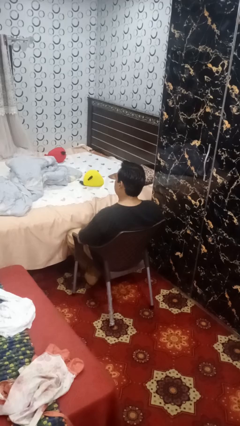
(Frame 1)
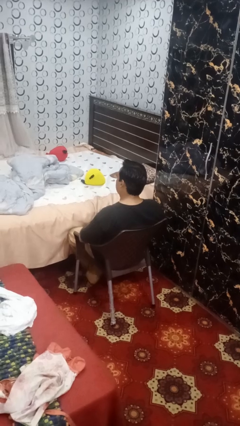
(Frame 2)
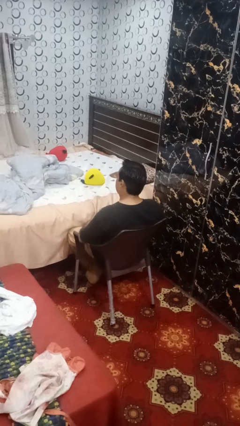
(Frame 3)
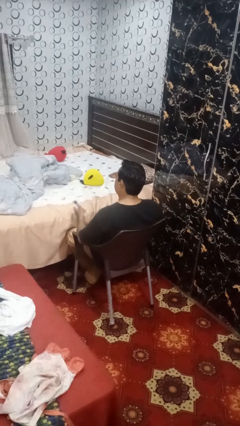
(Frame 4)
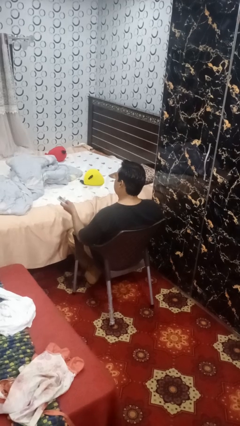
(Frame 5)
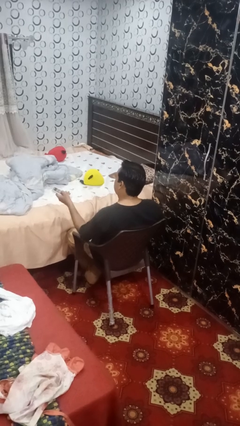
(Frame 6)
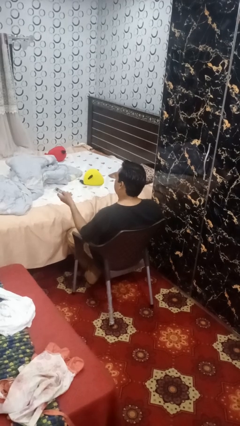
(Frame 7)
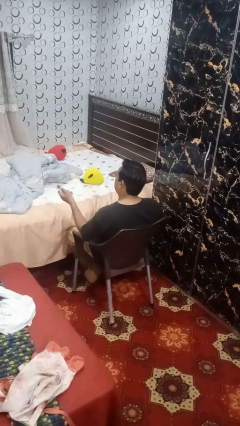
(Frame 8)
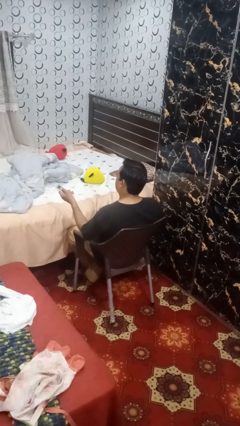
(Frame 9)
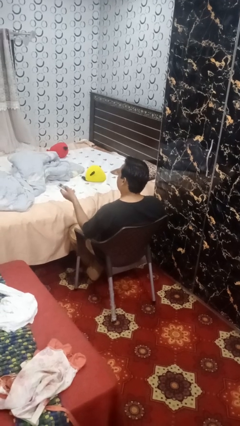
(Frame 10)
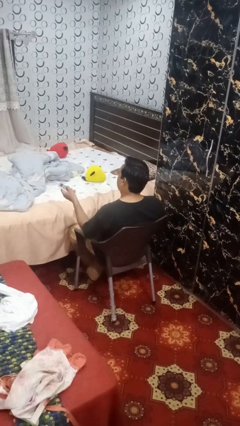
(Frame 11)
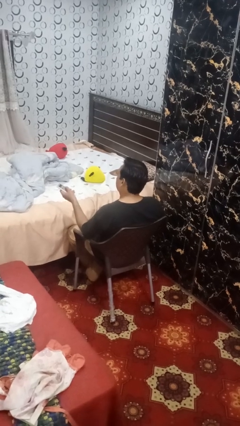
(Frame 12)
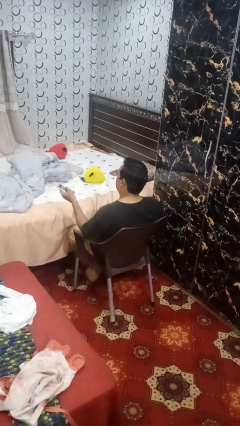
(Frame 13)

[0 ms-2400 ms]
person uses television remote

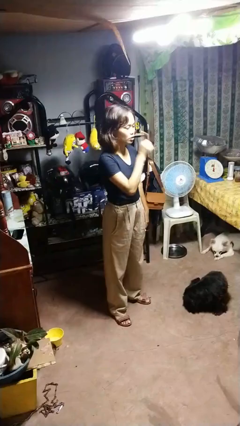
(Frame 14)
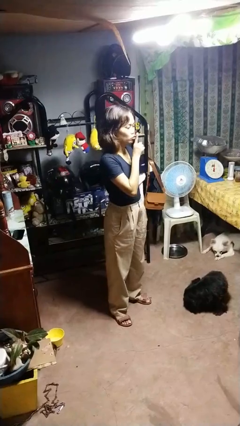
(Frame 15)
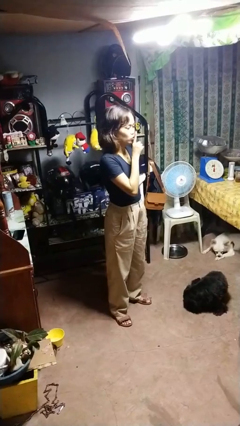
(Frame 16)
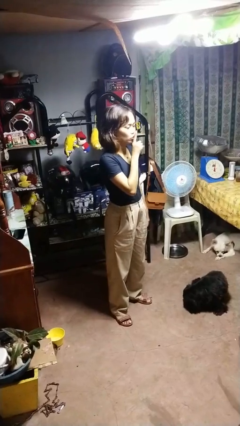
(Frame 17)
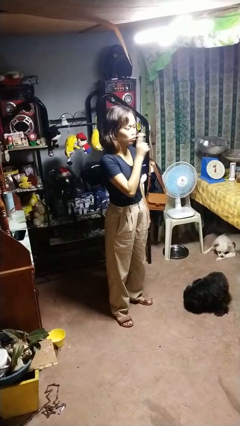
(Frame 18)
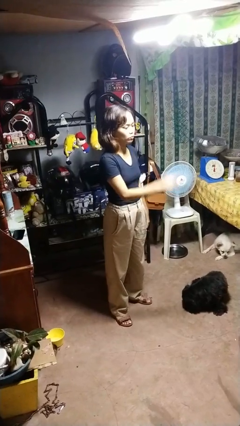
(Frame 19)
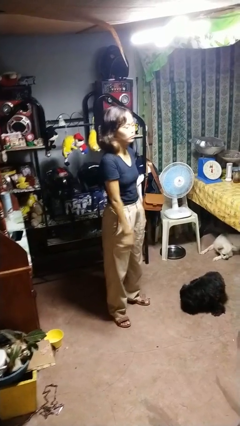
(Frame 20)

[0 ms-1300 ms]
person gestures be quiet

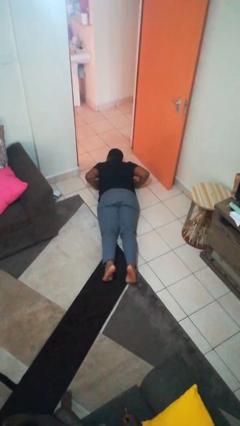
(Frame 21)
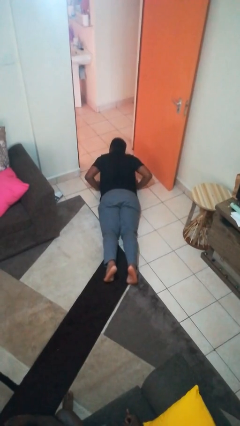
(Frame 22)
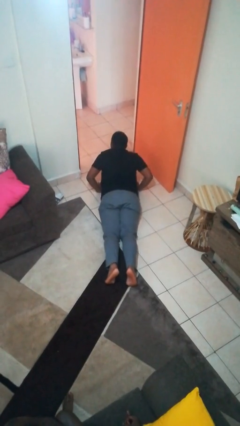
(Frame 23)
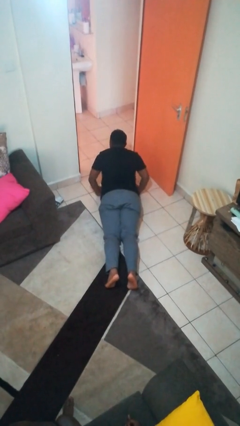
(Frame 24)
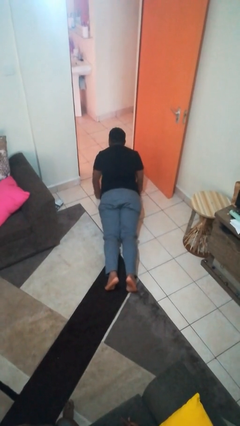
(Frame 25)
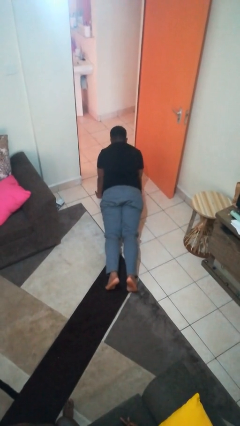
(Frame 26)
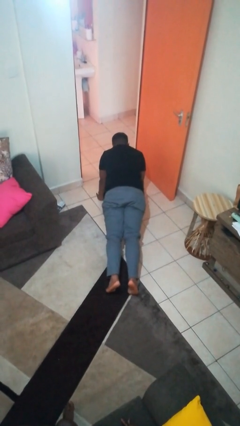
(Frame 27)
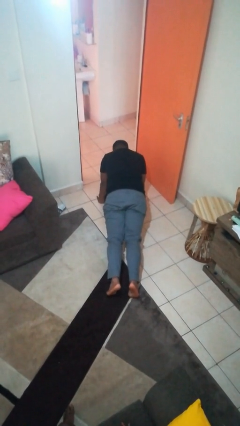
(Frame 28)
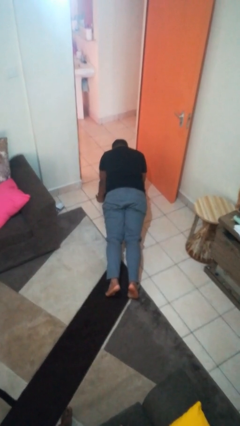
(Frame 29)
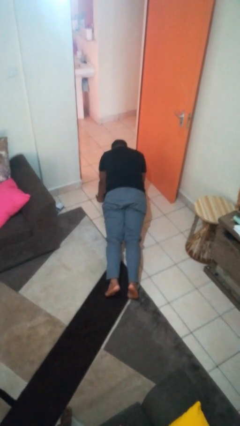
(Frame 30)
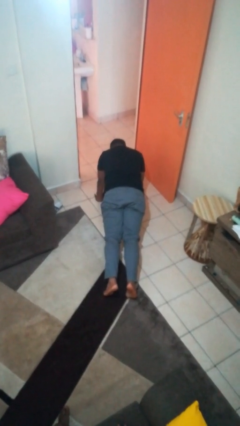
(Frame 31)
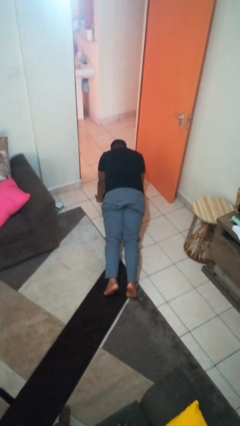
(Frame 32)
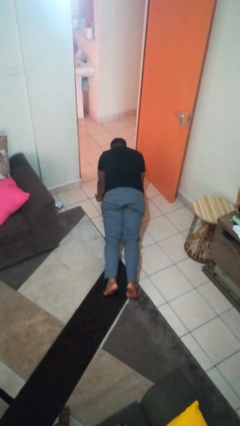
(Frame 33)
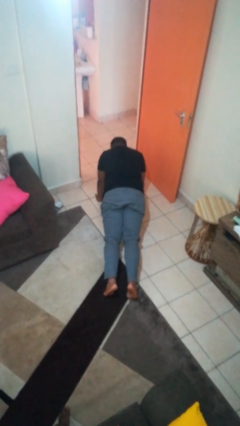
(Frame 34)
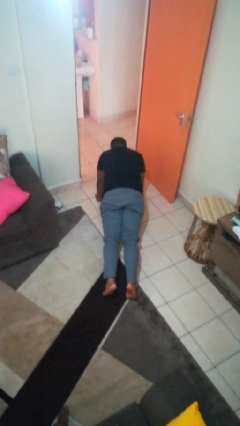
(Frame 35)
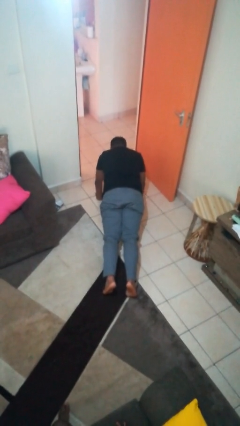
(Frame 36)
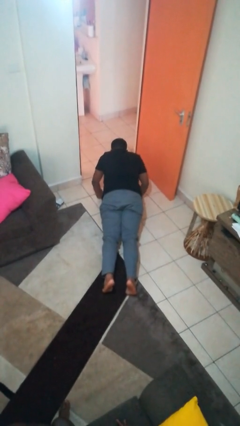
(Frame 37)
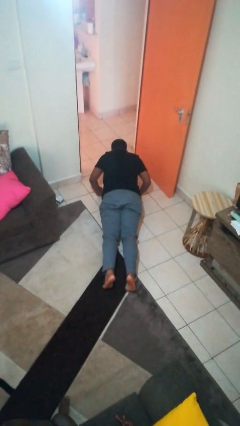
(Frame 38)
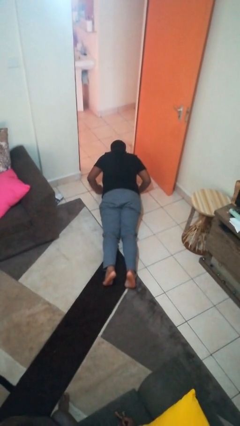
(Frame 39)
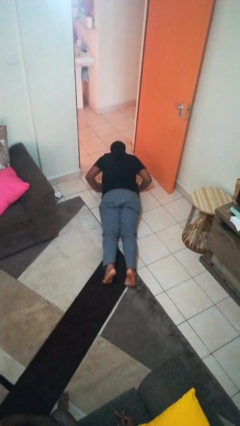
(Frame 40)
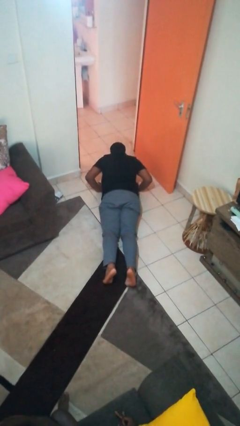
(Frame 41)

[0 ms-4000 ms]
person exercises with pushup

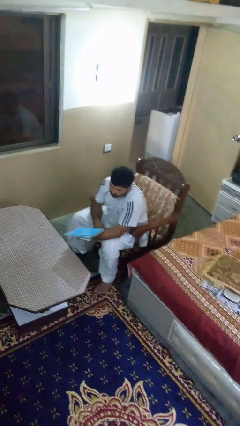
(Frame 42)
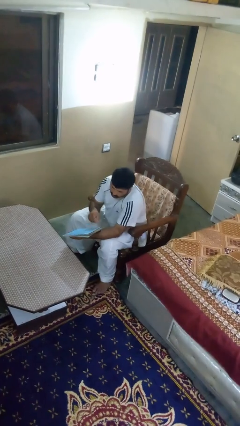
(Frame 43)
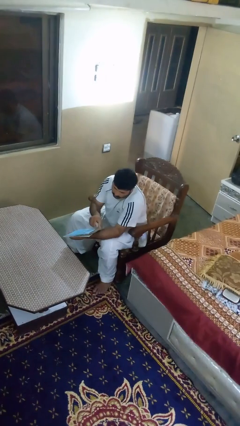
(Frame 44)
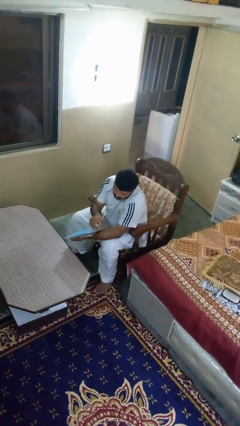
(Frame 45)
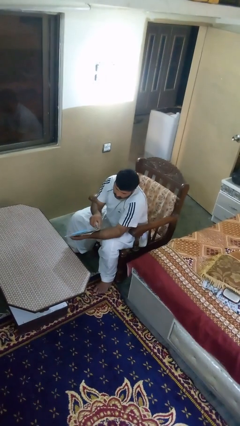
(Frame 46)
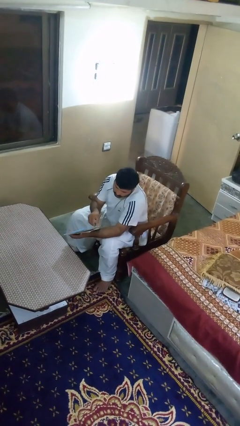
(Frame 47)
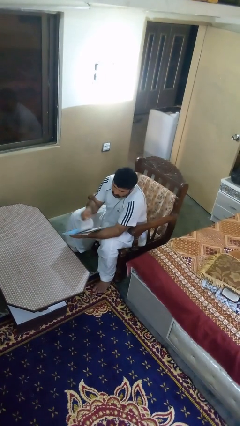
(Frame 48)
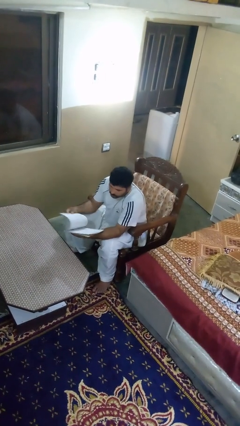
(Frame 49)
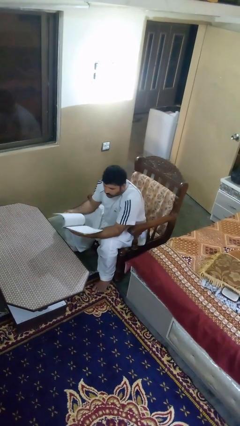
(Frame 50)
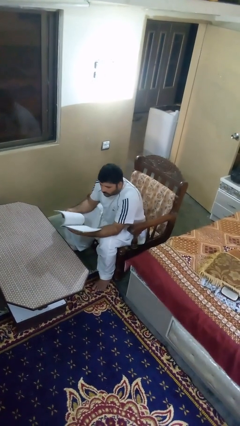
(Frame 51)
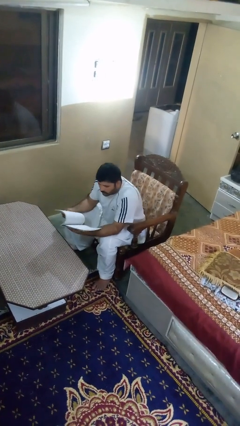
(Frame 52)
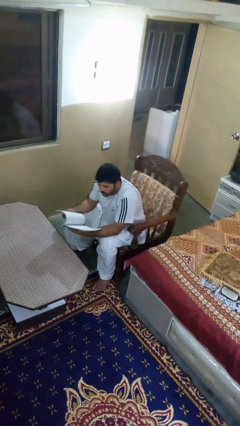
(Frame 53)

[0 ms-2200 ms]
person reads magazine

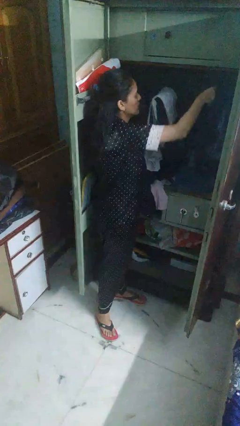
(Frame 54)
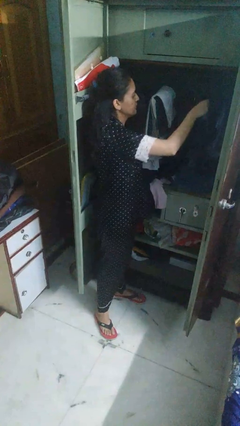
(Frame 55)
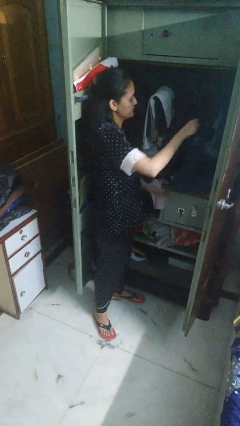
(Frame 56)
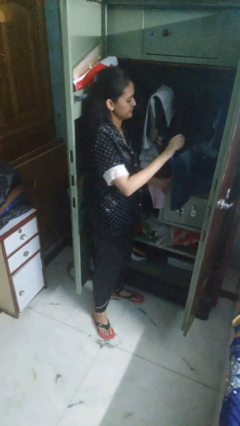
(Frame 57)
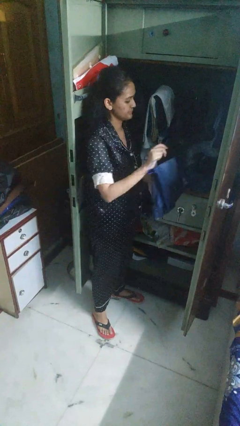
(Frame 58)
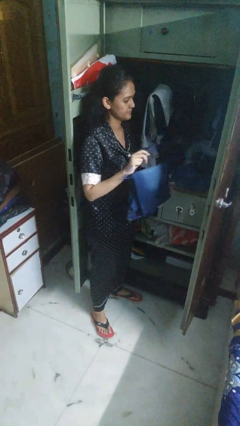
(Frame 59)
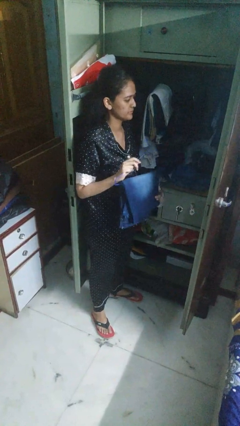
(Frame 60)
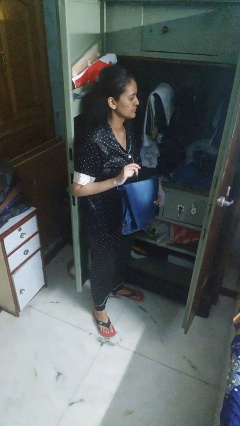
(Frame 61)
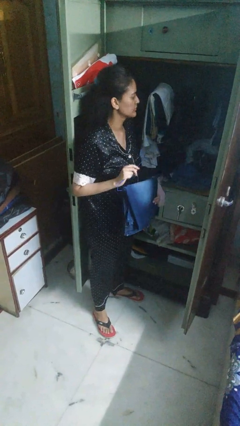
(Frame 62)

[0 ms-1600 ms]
person takes clothes from closet

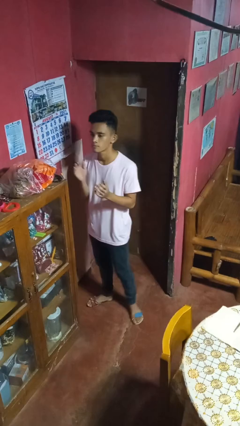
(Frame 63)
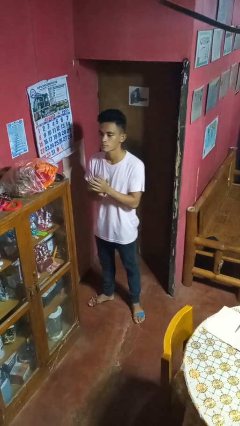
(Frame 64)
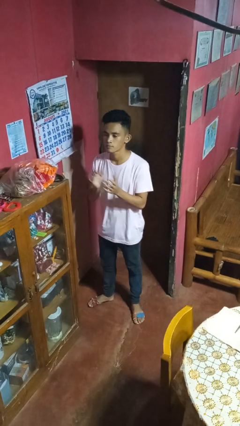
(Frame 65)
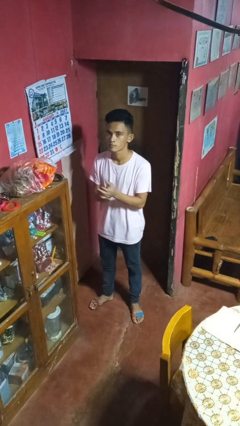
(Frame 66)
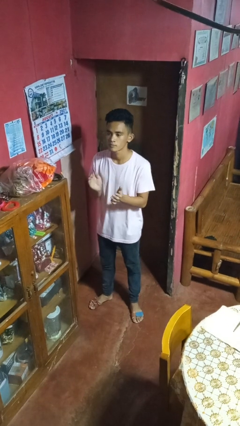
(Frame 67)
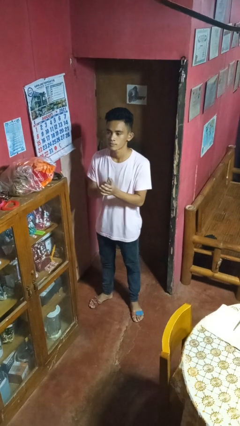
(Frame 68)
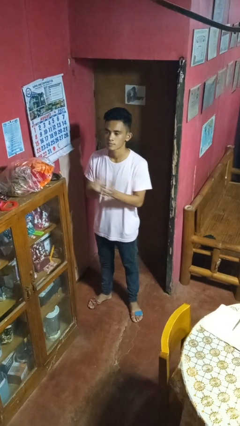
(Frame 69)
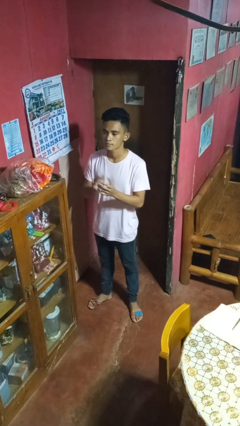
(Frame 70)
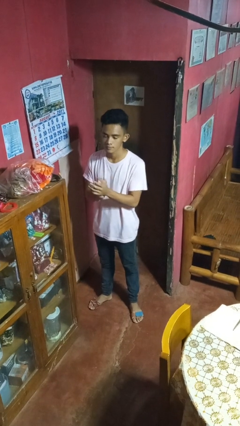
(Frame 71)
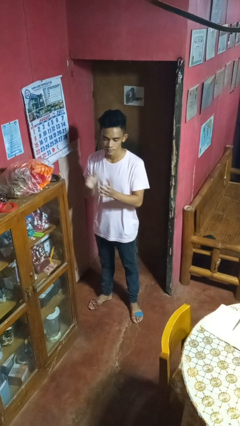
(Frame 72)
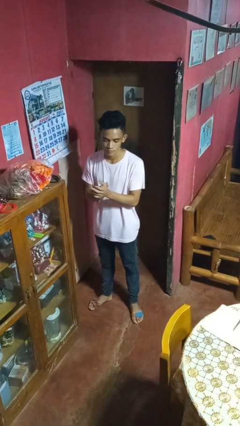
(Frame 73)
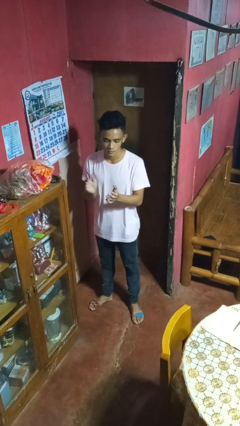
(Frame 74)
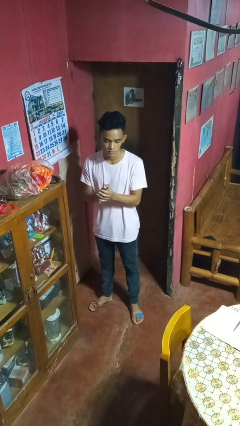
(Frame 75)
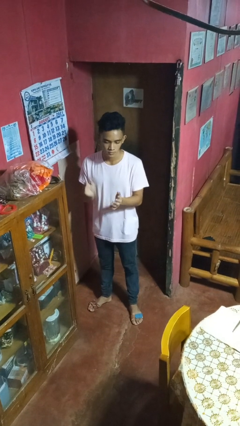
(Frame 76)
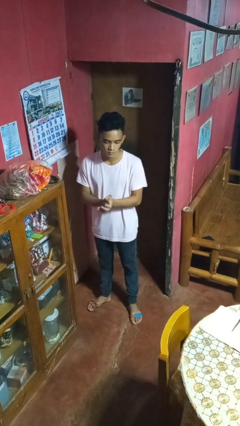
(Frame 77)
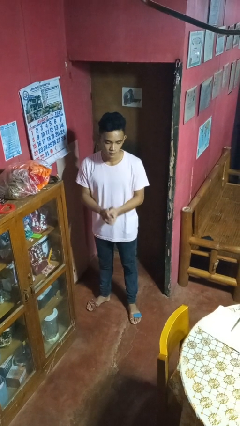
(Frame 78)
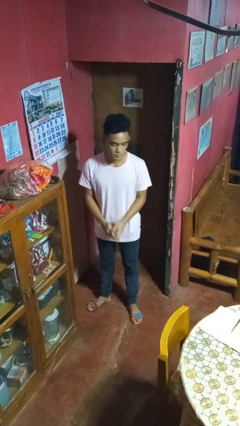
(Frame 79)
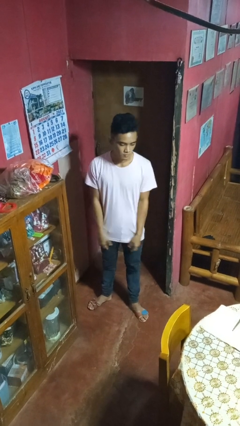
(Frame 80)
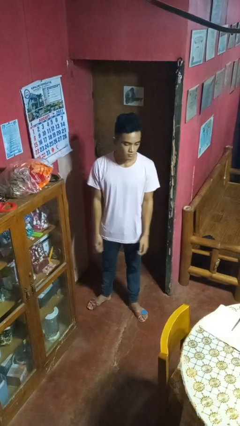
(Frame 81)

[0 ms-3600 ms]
person claps hands

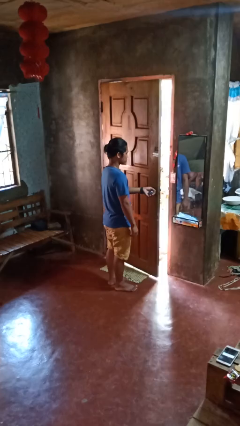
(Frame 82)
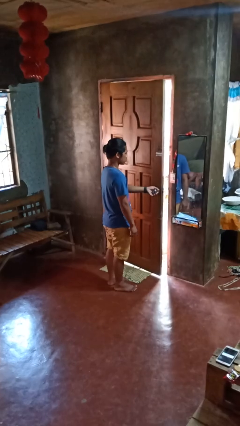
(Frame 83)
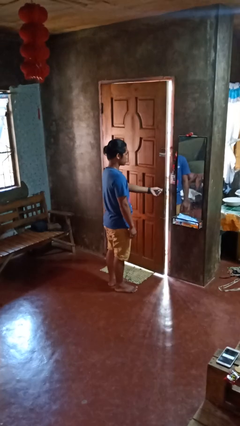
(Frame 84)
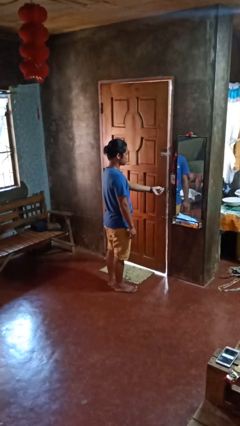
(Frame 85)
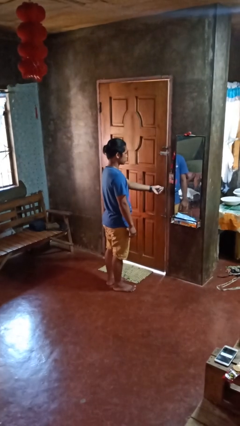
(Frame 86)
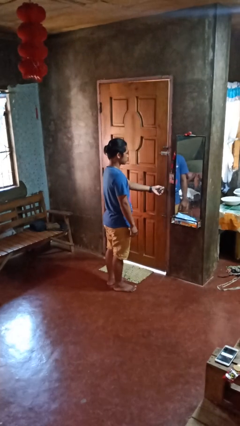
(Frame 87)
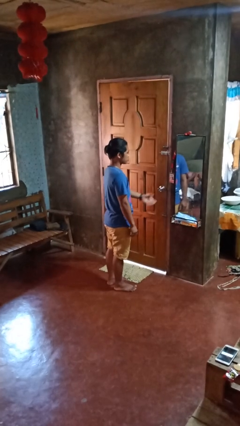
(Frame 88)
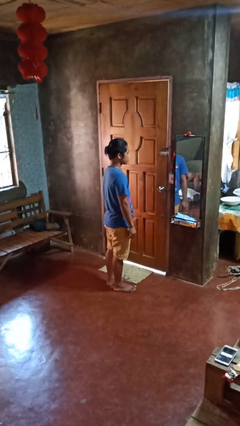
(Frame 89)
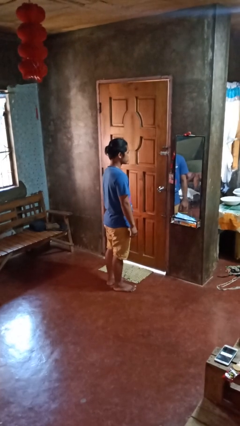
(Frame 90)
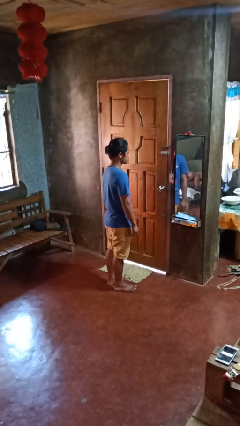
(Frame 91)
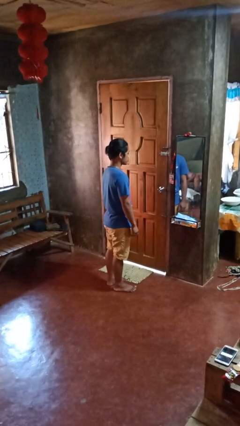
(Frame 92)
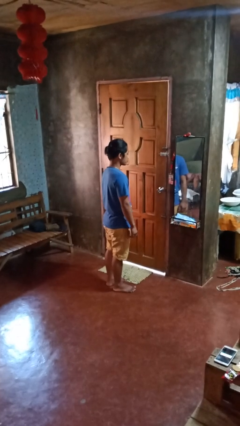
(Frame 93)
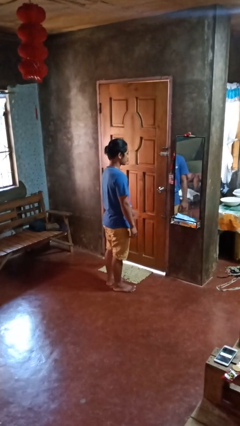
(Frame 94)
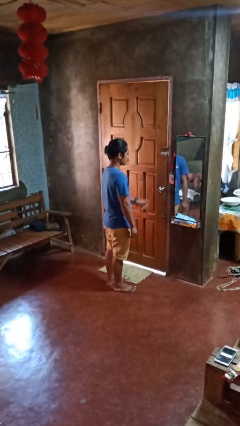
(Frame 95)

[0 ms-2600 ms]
person closes facility door
